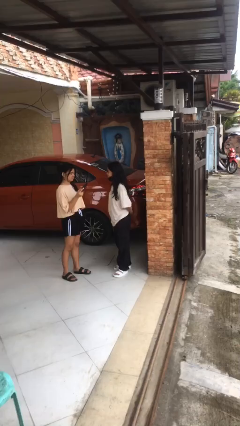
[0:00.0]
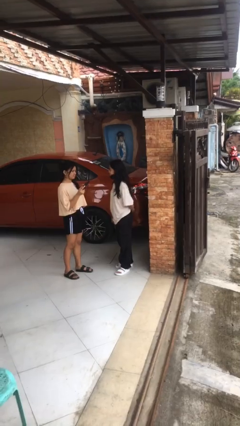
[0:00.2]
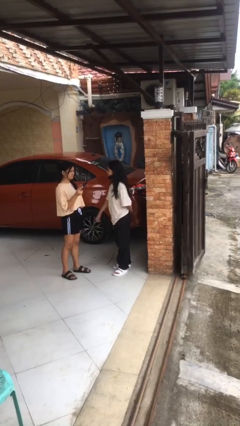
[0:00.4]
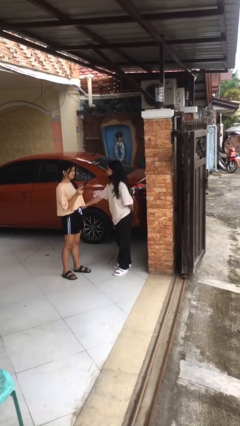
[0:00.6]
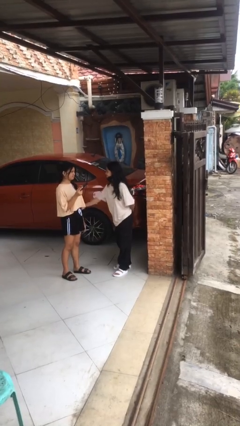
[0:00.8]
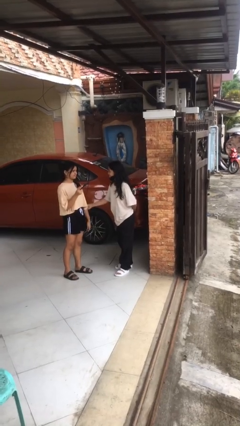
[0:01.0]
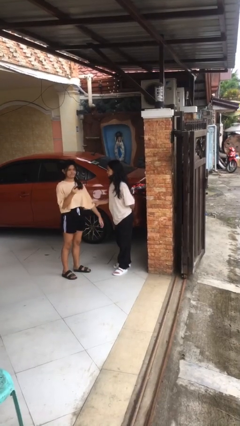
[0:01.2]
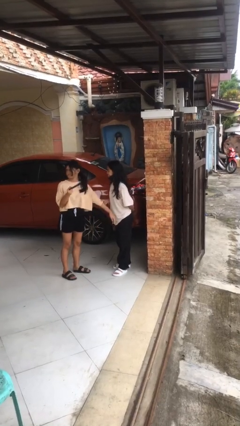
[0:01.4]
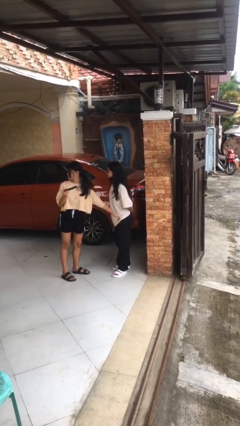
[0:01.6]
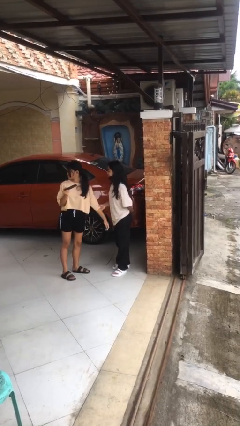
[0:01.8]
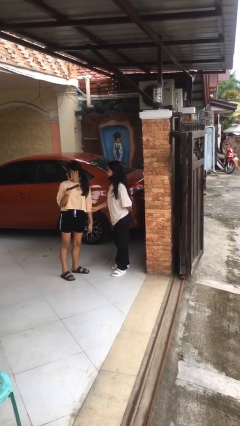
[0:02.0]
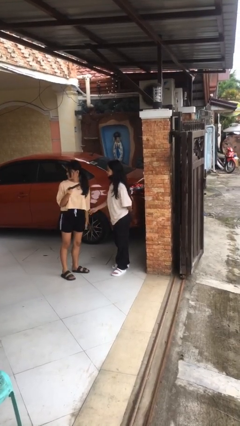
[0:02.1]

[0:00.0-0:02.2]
person grabs person by forearm

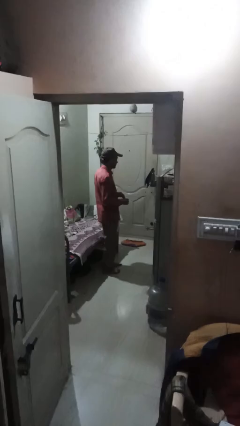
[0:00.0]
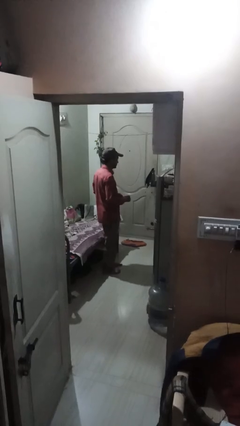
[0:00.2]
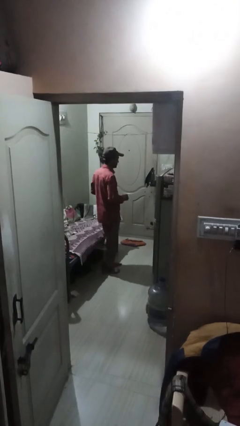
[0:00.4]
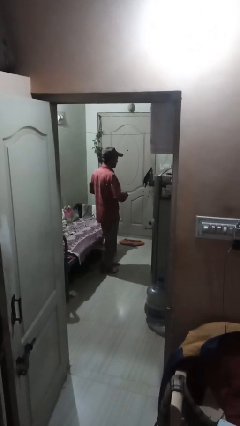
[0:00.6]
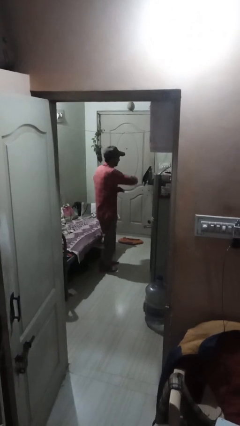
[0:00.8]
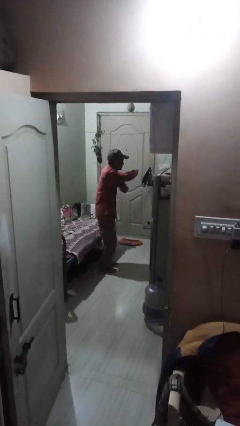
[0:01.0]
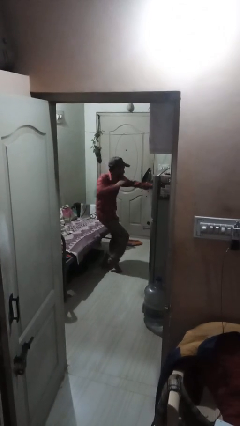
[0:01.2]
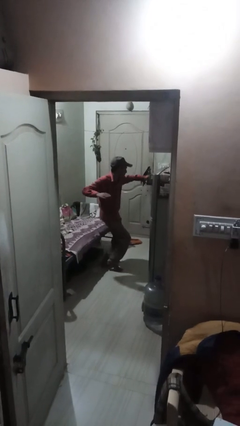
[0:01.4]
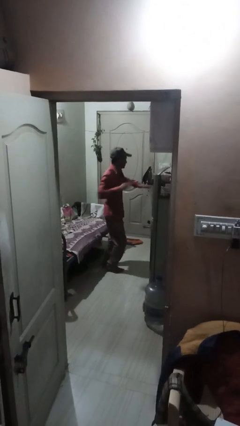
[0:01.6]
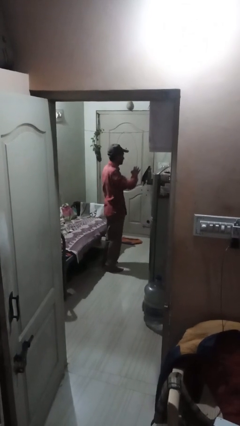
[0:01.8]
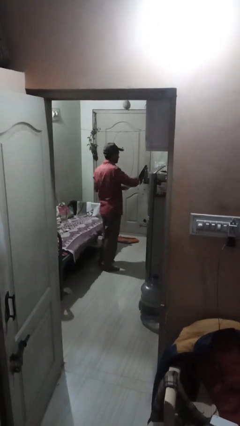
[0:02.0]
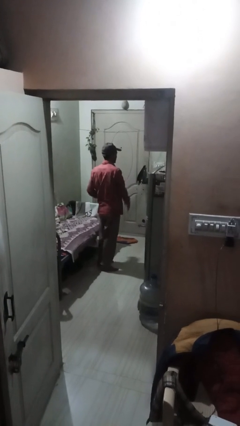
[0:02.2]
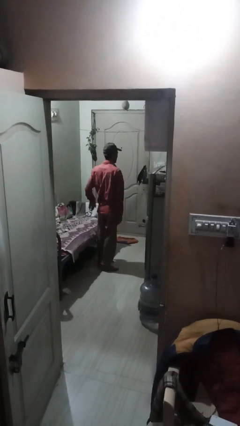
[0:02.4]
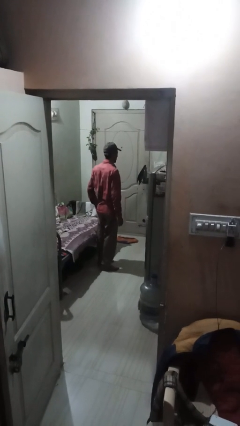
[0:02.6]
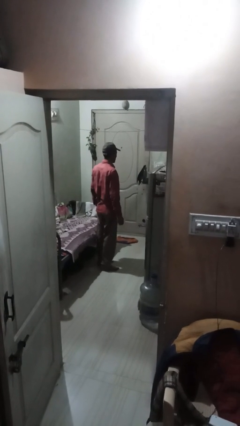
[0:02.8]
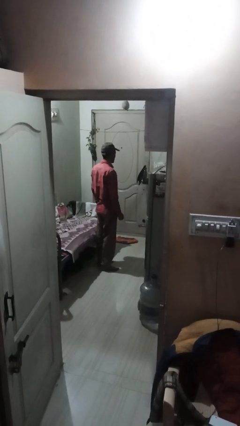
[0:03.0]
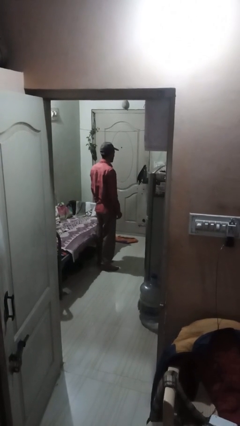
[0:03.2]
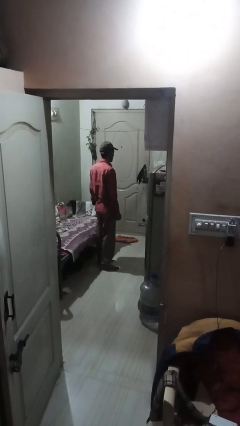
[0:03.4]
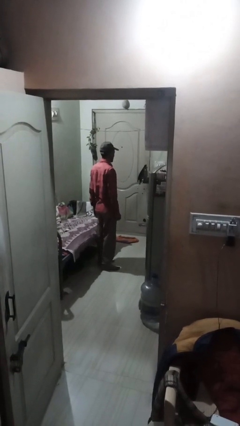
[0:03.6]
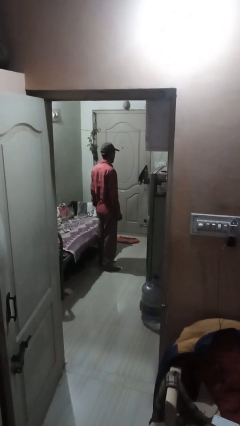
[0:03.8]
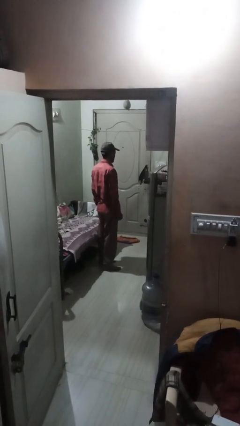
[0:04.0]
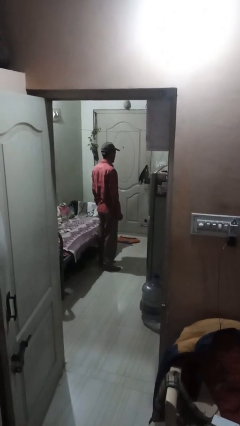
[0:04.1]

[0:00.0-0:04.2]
person karate chop

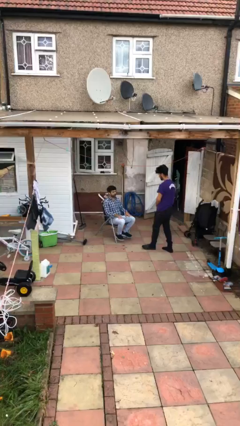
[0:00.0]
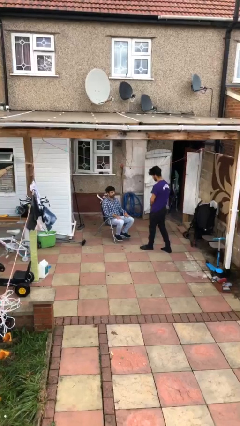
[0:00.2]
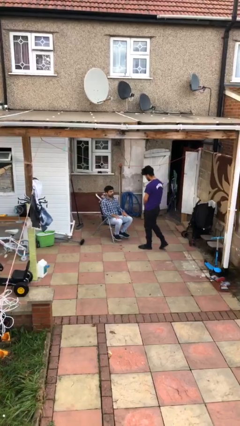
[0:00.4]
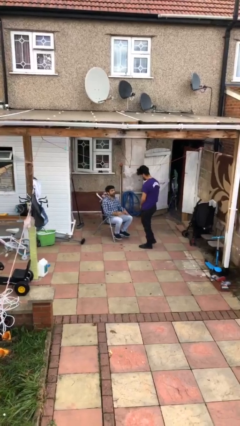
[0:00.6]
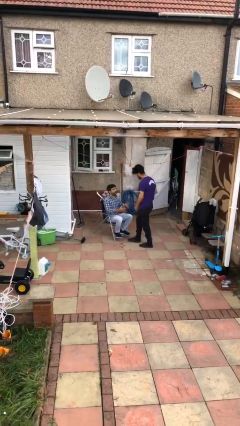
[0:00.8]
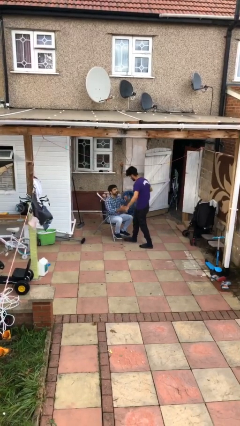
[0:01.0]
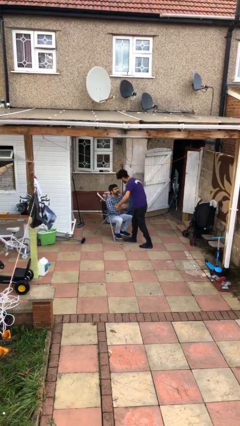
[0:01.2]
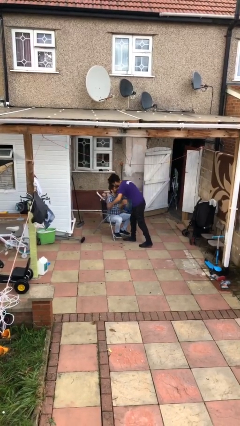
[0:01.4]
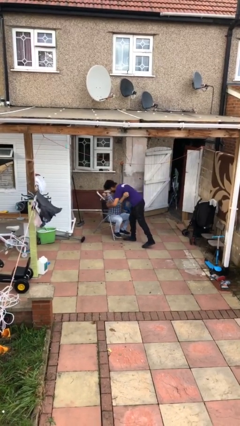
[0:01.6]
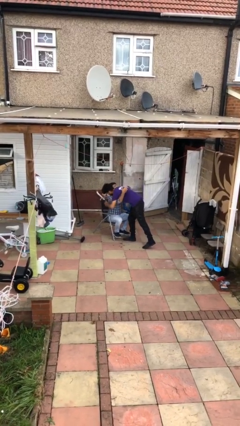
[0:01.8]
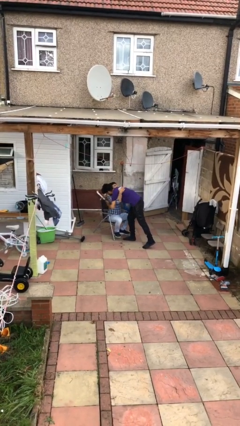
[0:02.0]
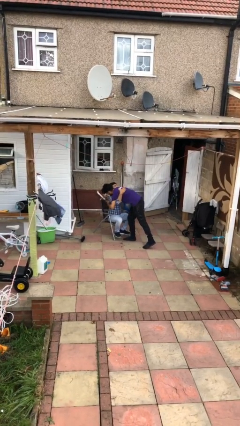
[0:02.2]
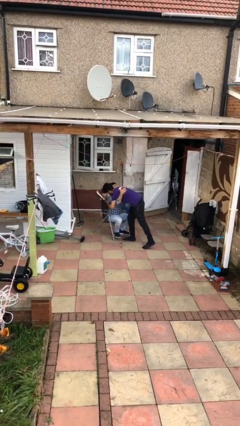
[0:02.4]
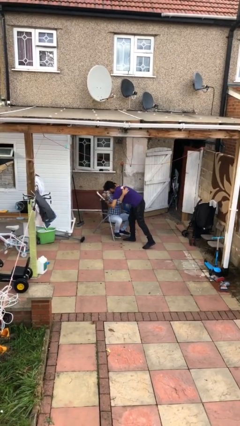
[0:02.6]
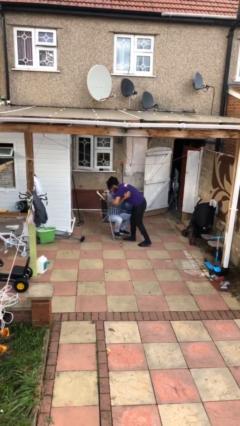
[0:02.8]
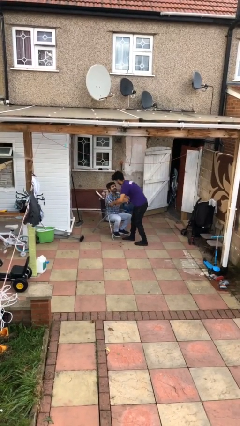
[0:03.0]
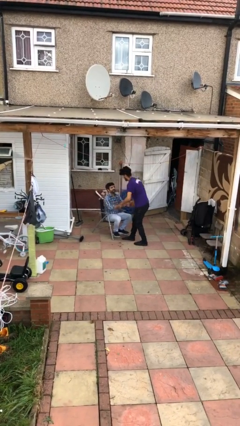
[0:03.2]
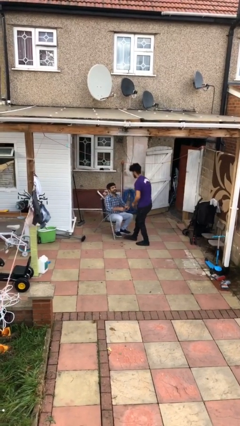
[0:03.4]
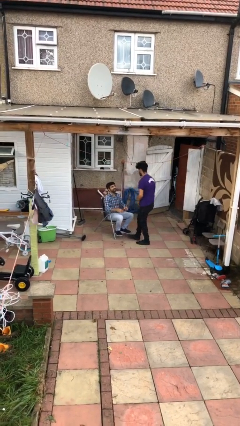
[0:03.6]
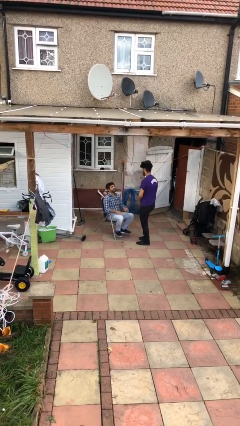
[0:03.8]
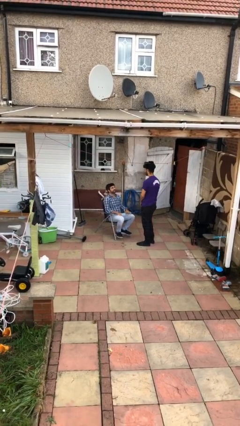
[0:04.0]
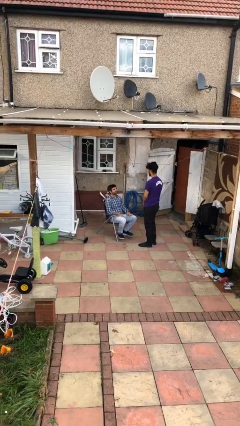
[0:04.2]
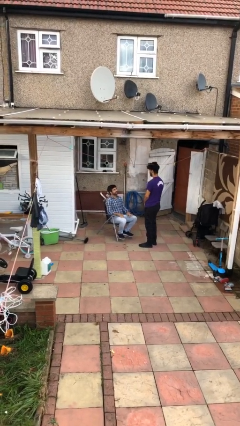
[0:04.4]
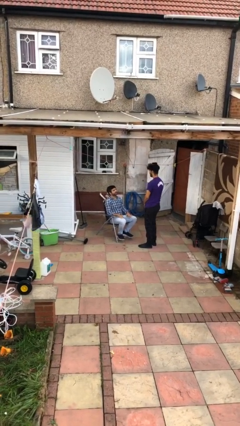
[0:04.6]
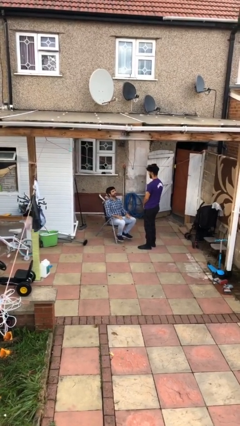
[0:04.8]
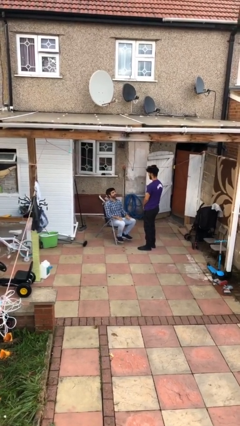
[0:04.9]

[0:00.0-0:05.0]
person embraces person

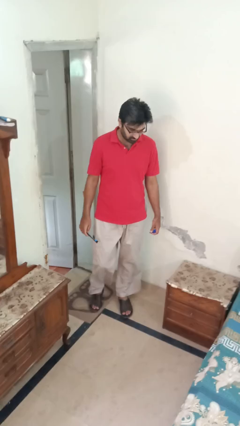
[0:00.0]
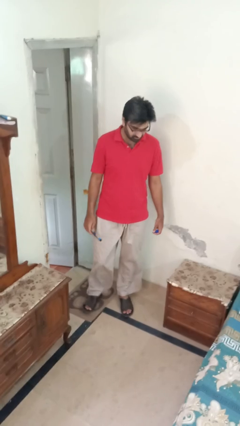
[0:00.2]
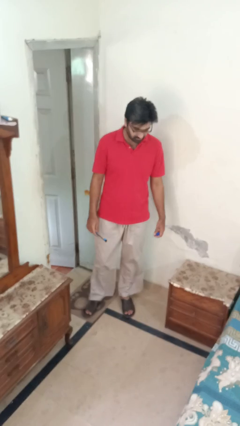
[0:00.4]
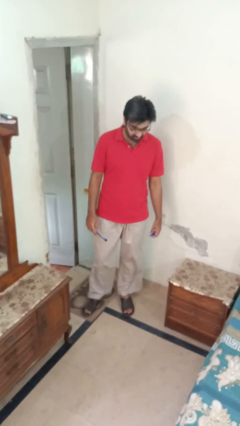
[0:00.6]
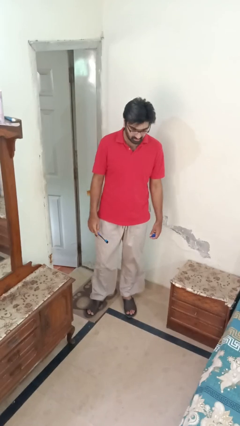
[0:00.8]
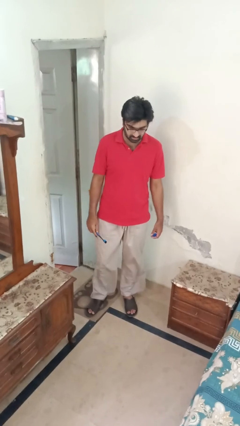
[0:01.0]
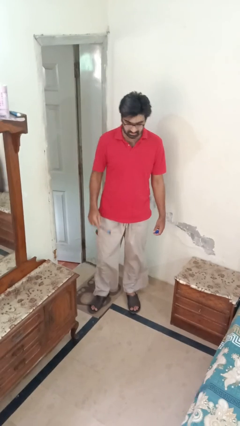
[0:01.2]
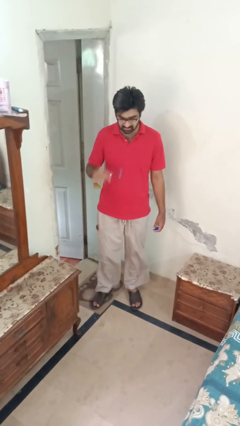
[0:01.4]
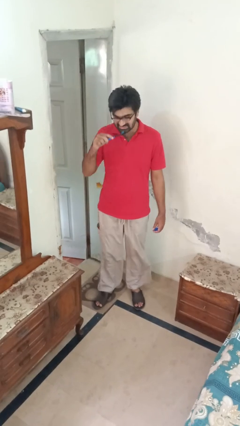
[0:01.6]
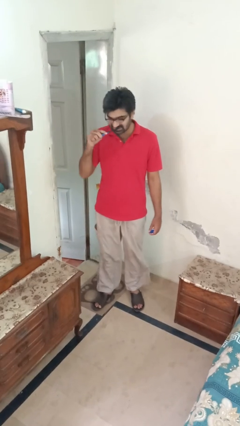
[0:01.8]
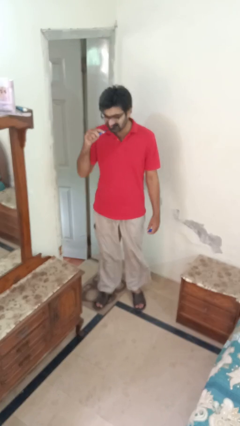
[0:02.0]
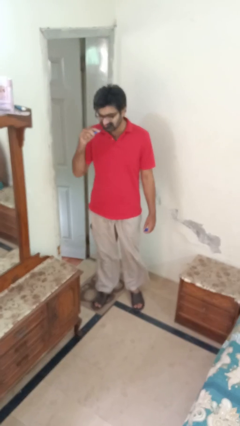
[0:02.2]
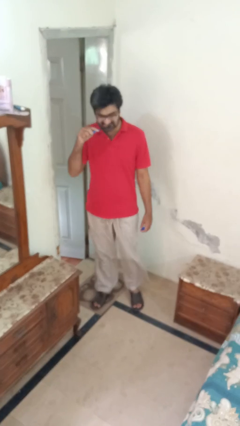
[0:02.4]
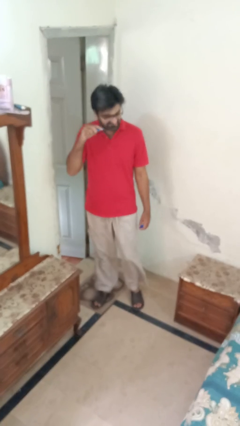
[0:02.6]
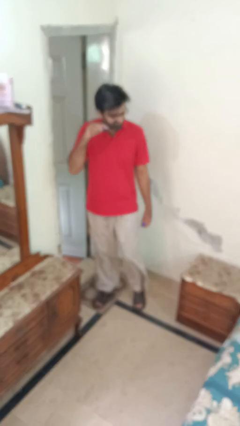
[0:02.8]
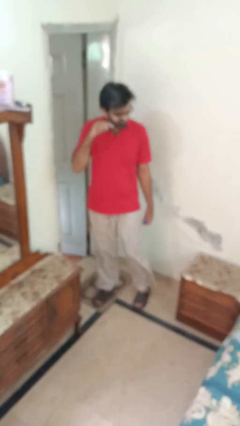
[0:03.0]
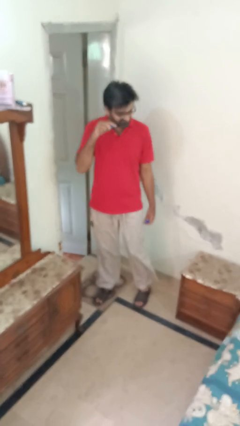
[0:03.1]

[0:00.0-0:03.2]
person brushes teeth

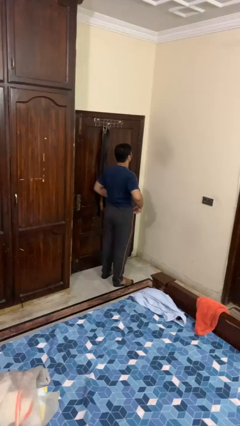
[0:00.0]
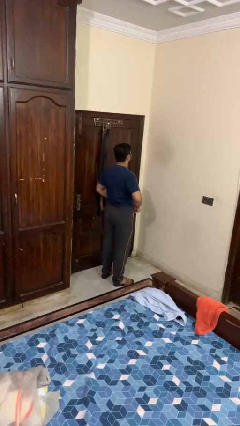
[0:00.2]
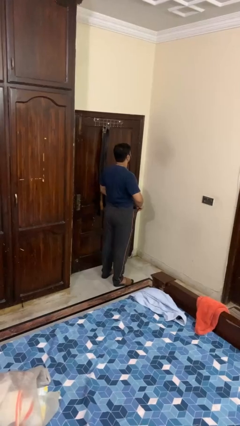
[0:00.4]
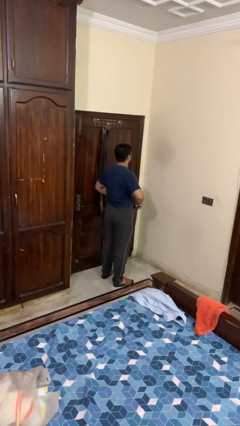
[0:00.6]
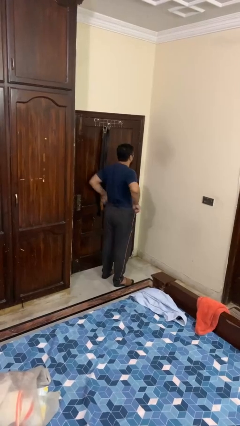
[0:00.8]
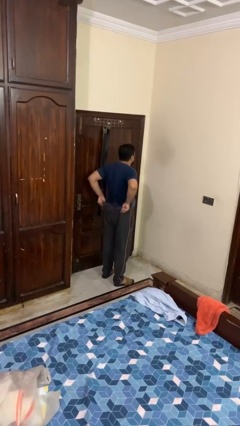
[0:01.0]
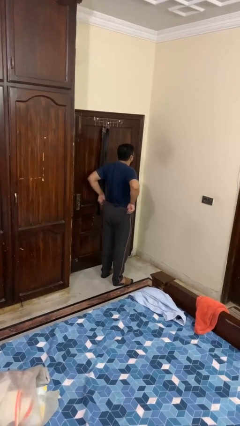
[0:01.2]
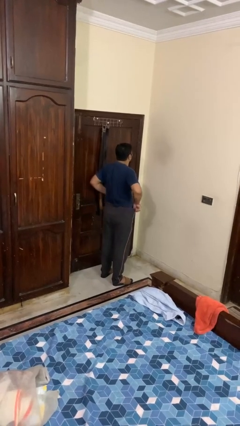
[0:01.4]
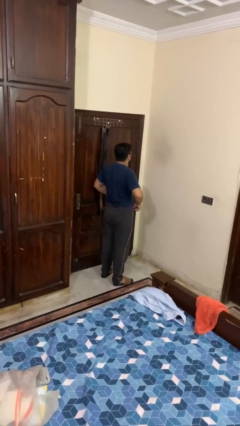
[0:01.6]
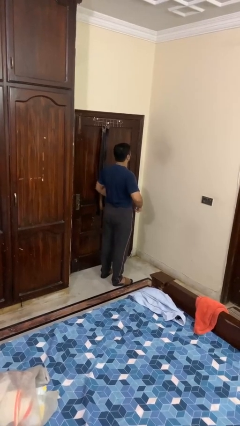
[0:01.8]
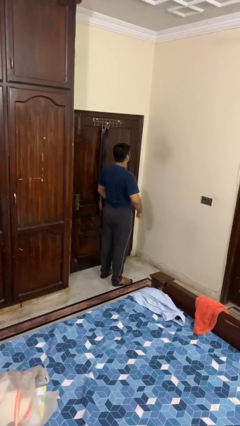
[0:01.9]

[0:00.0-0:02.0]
person hikes up pants

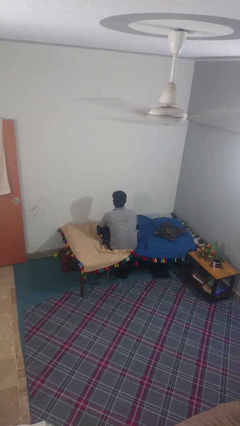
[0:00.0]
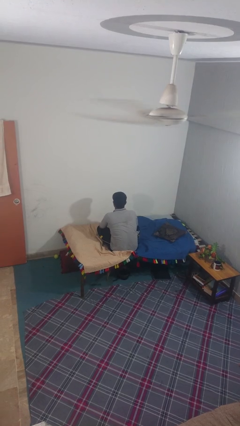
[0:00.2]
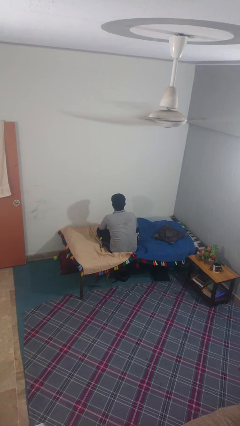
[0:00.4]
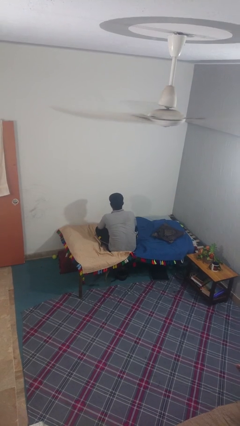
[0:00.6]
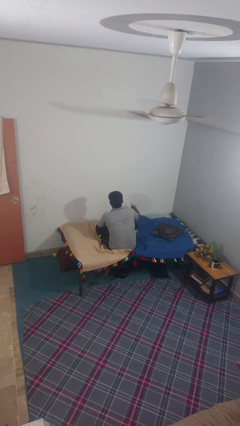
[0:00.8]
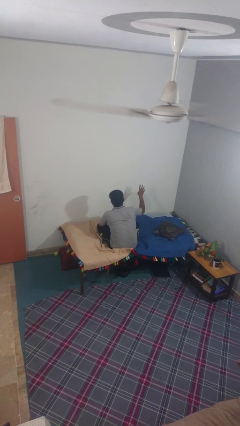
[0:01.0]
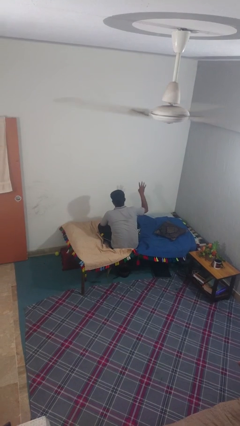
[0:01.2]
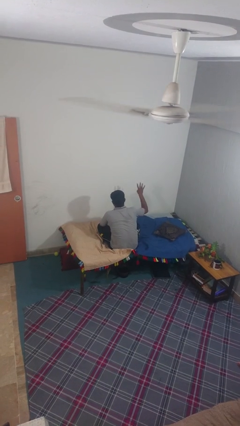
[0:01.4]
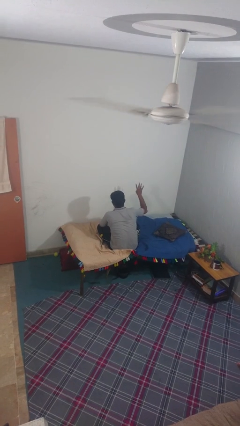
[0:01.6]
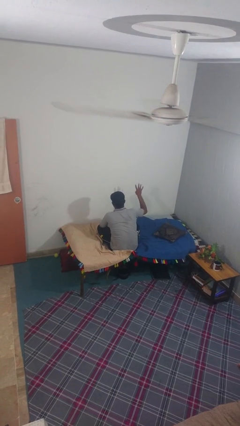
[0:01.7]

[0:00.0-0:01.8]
person gestures number four
